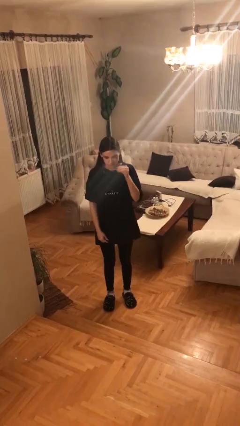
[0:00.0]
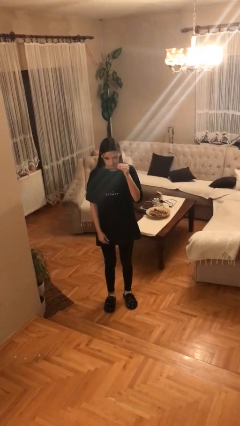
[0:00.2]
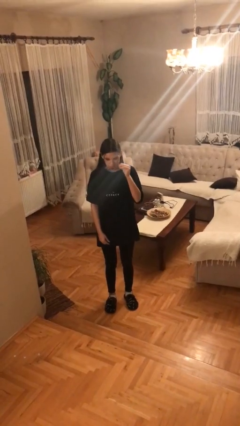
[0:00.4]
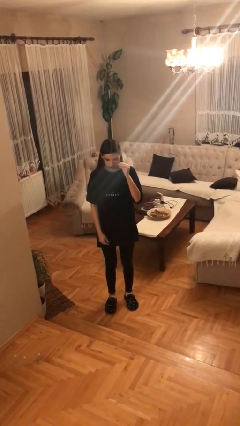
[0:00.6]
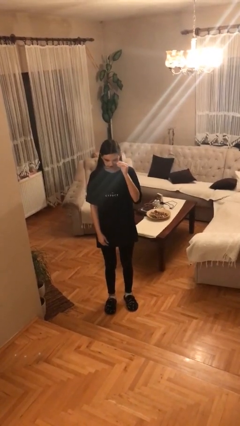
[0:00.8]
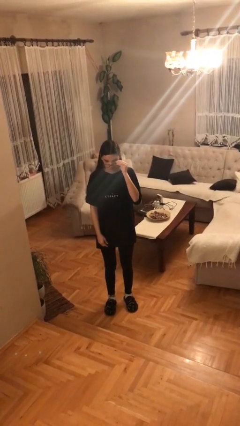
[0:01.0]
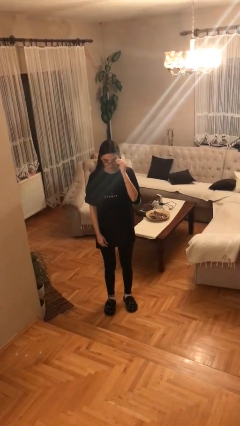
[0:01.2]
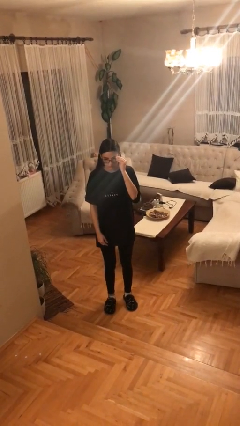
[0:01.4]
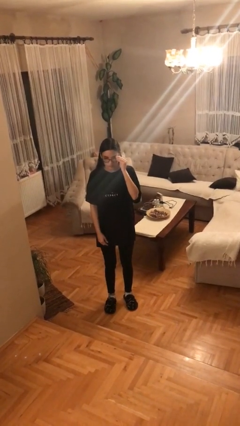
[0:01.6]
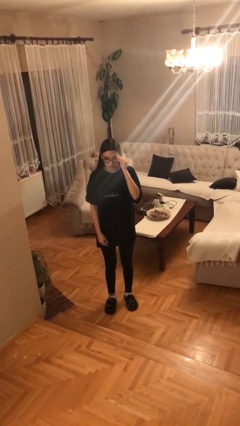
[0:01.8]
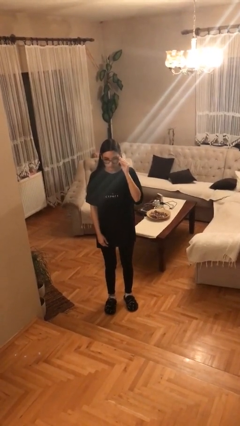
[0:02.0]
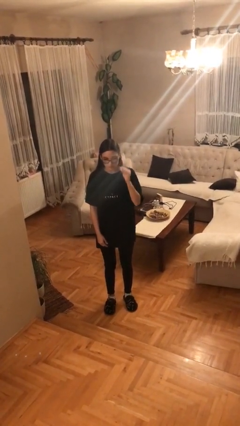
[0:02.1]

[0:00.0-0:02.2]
person puts on glasses

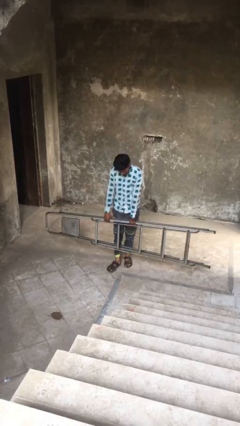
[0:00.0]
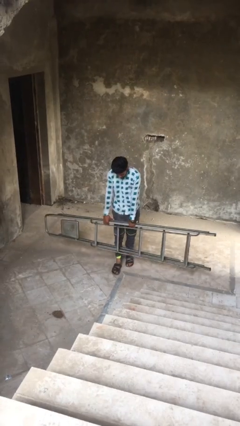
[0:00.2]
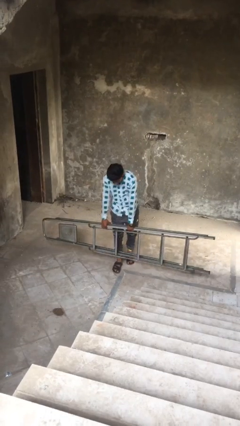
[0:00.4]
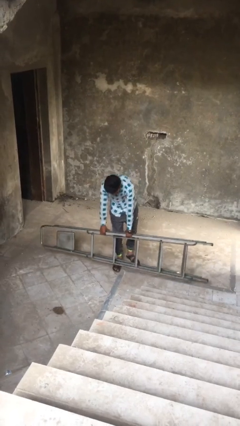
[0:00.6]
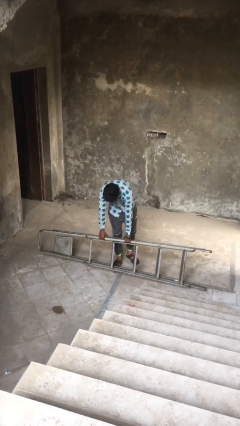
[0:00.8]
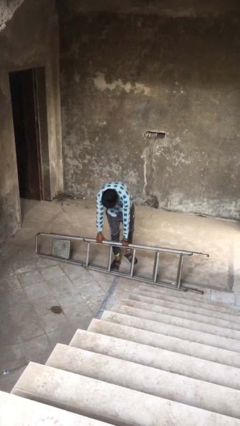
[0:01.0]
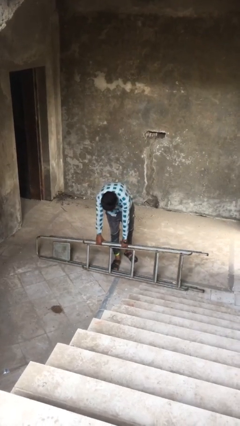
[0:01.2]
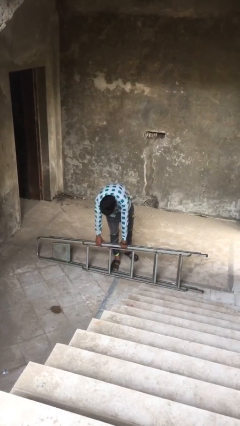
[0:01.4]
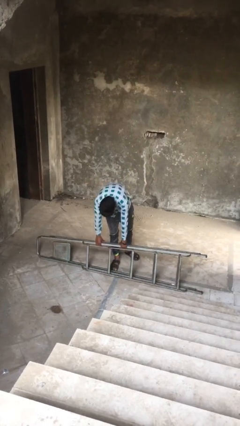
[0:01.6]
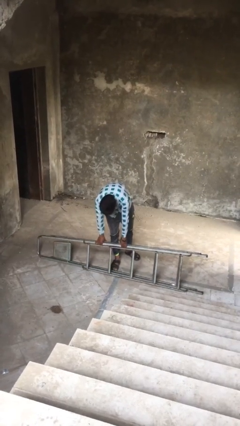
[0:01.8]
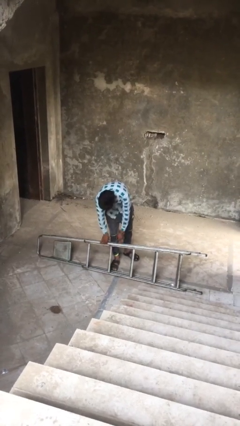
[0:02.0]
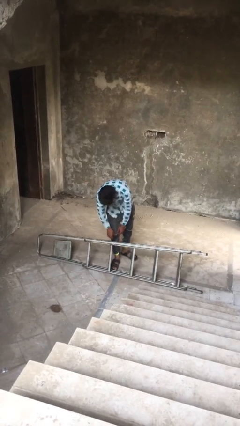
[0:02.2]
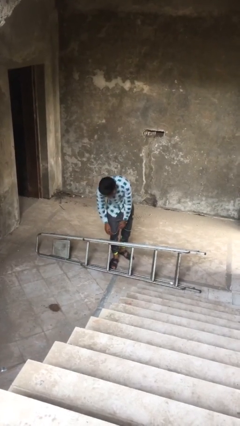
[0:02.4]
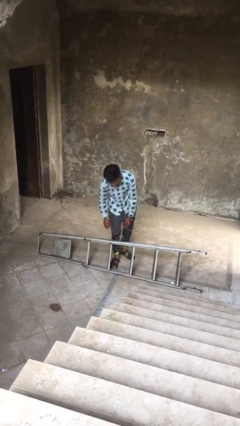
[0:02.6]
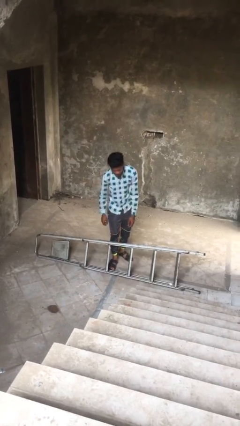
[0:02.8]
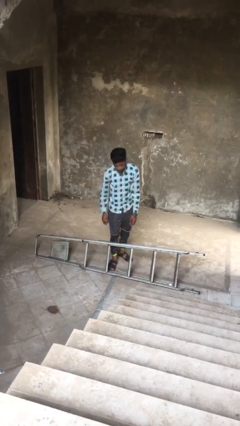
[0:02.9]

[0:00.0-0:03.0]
person puts down object on floor

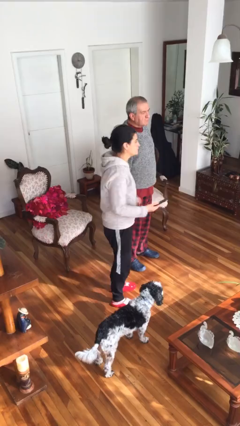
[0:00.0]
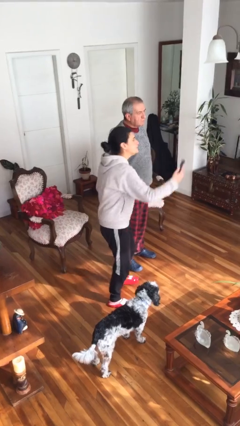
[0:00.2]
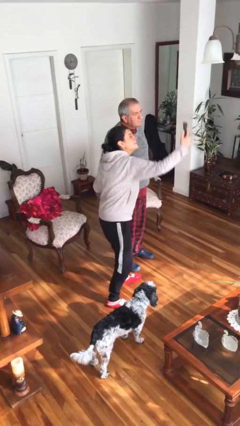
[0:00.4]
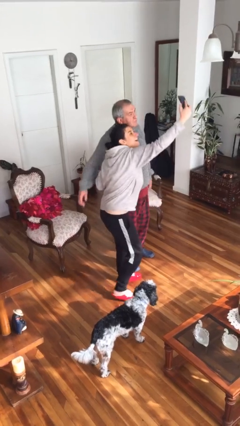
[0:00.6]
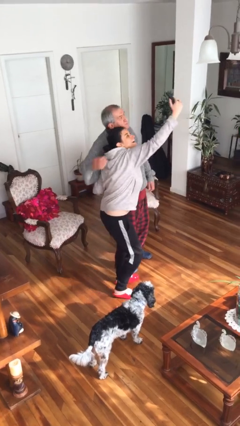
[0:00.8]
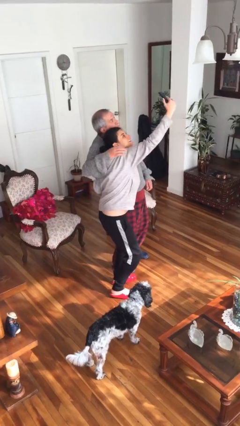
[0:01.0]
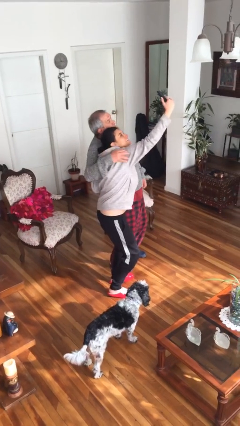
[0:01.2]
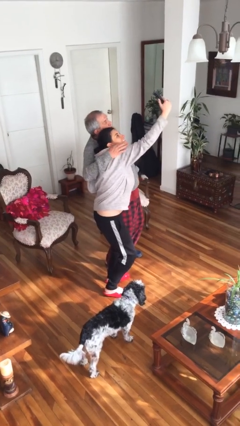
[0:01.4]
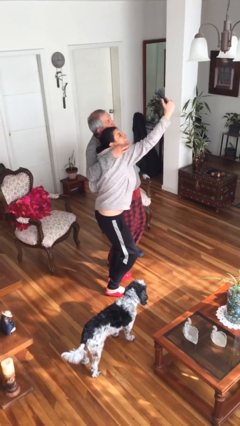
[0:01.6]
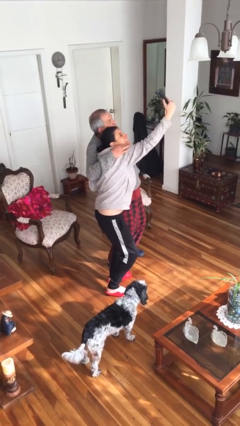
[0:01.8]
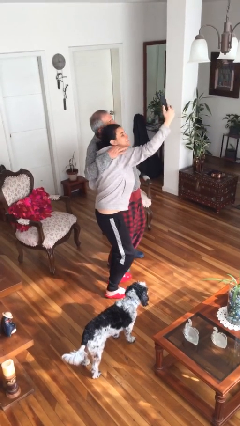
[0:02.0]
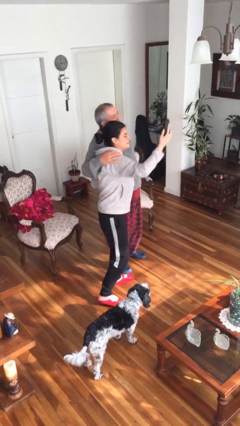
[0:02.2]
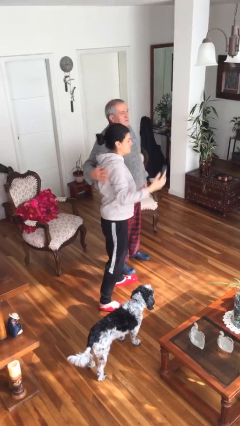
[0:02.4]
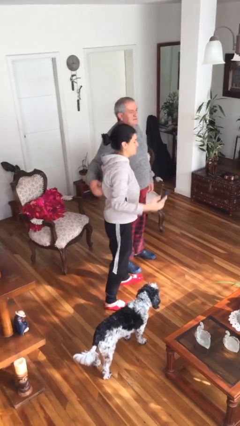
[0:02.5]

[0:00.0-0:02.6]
person takes selfie with person

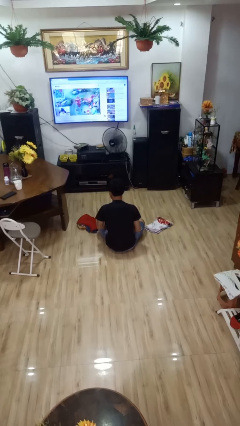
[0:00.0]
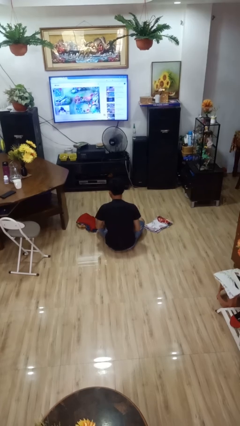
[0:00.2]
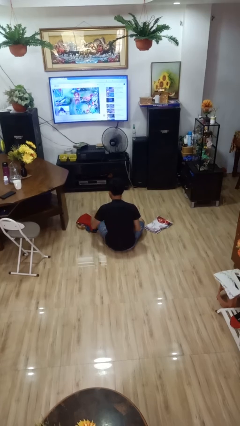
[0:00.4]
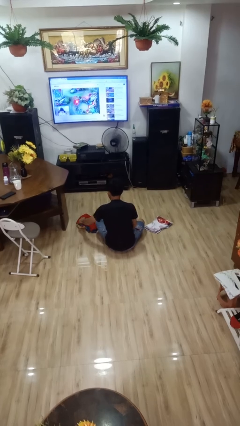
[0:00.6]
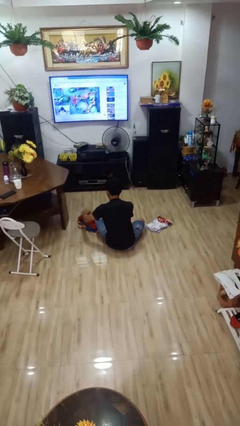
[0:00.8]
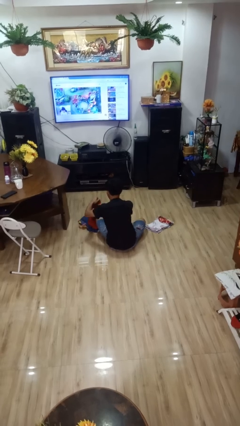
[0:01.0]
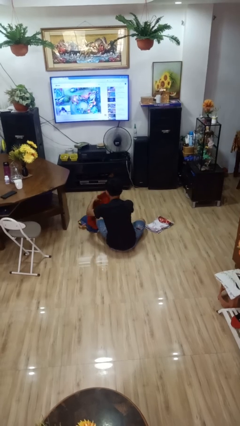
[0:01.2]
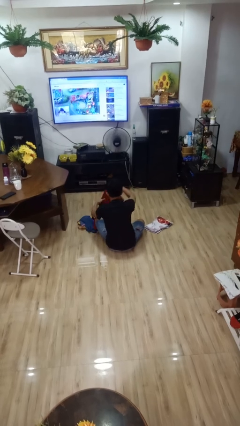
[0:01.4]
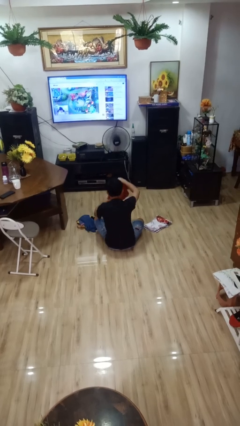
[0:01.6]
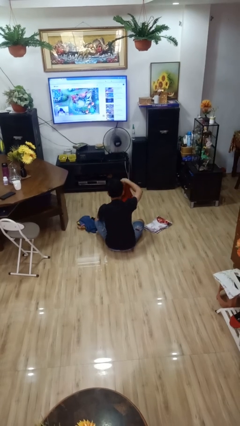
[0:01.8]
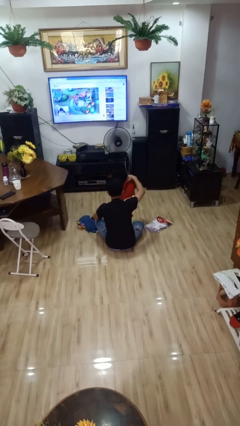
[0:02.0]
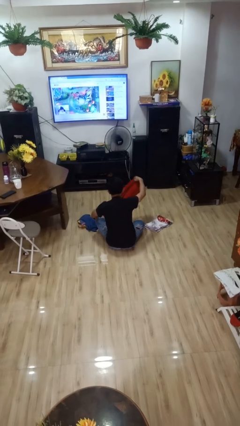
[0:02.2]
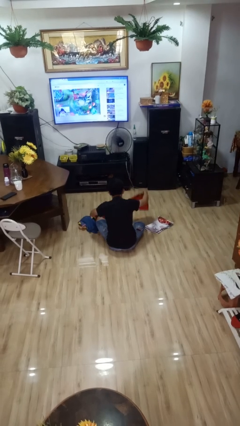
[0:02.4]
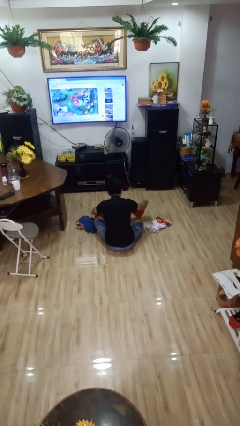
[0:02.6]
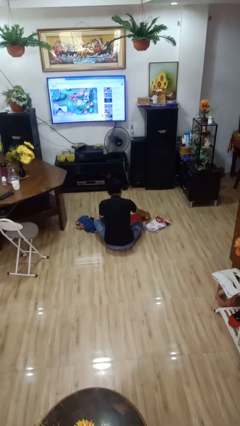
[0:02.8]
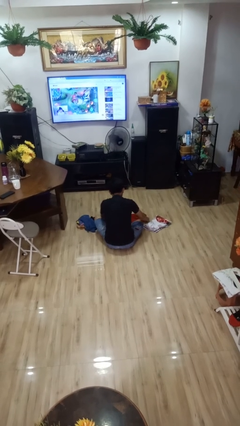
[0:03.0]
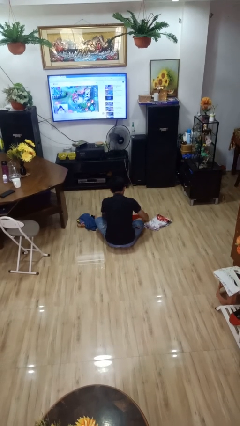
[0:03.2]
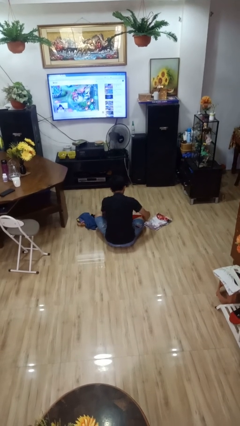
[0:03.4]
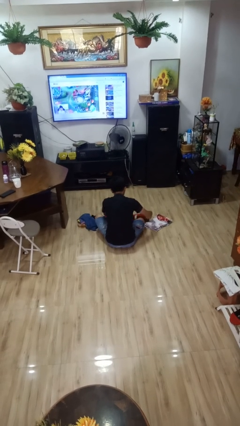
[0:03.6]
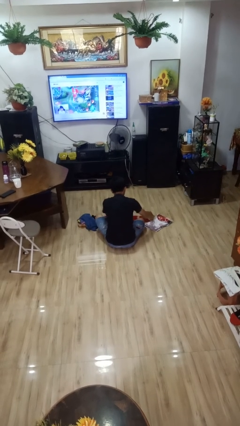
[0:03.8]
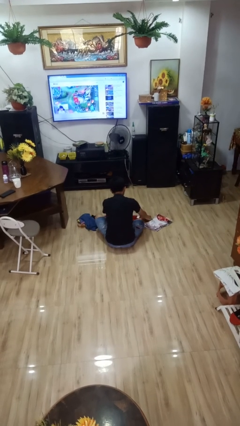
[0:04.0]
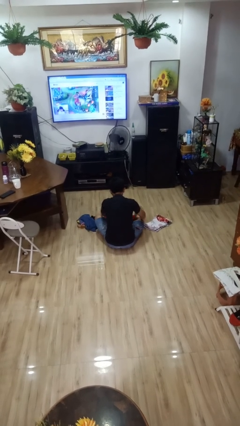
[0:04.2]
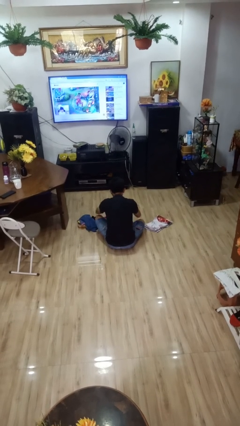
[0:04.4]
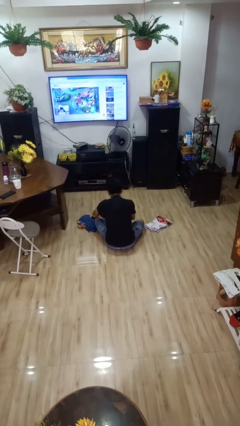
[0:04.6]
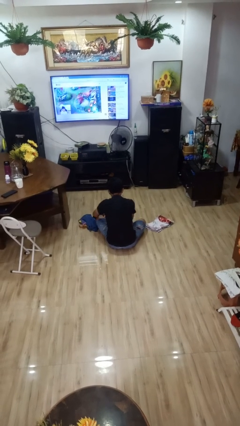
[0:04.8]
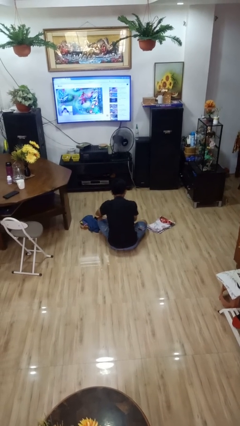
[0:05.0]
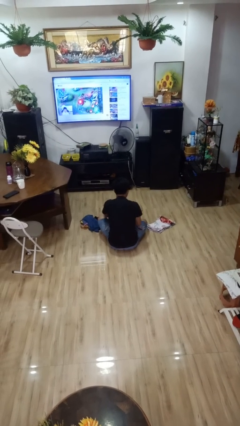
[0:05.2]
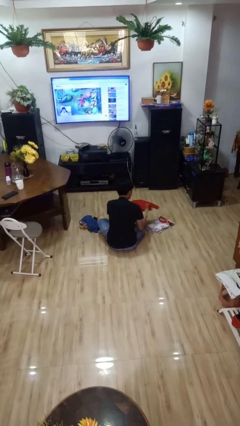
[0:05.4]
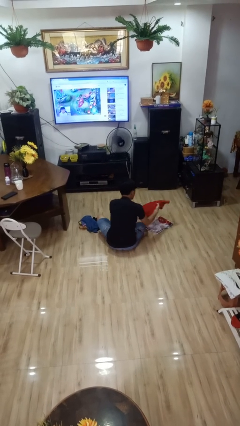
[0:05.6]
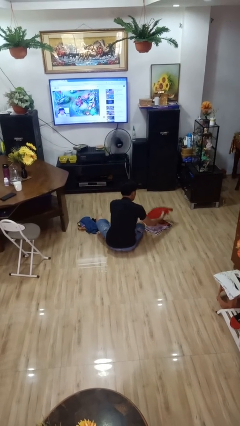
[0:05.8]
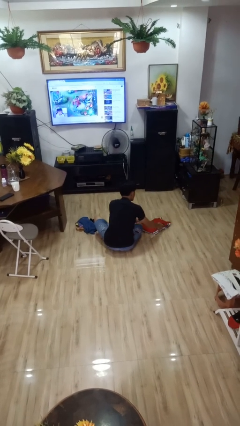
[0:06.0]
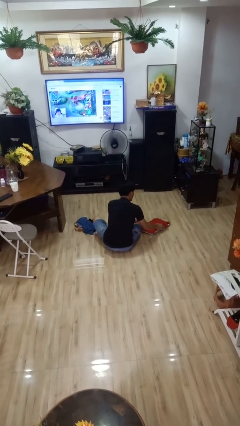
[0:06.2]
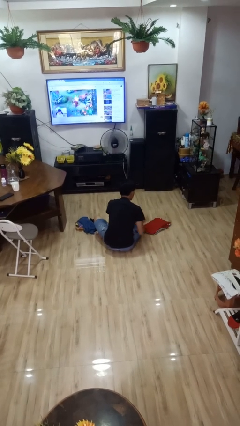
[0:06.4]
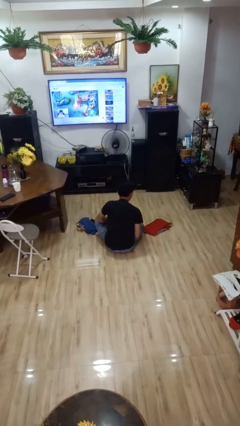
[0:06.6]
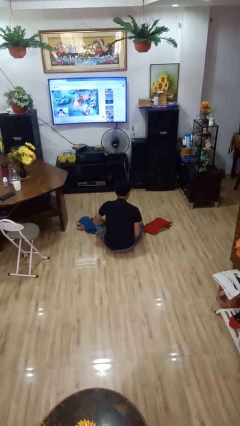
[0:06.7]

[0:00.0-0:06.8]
person folds shirt

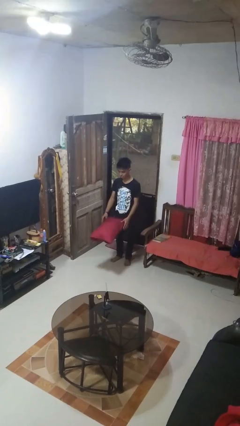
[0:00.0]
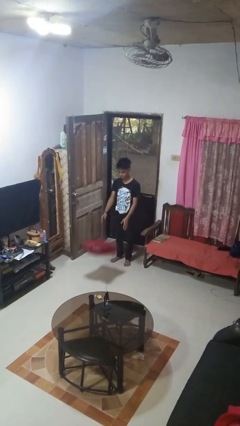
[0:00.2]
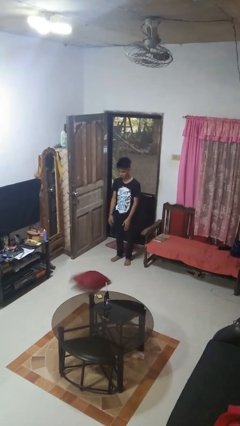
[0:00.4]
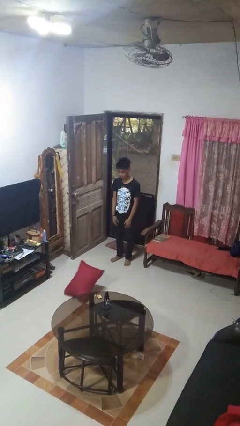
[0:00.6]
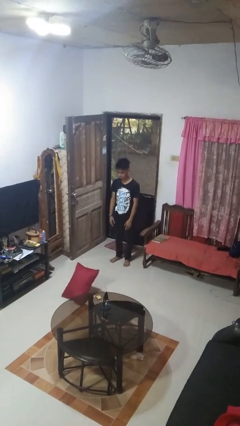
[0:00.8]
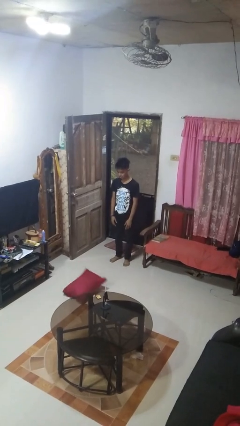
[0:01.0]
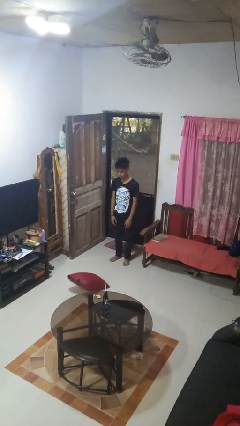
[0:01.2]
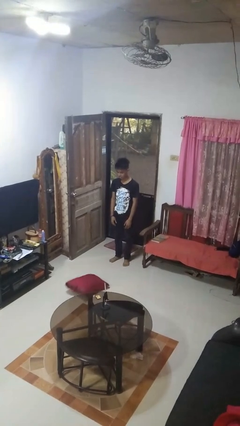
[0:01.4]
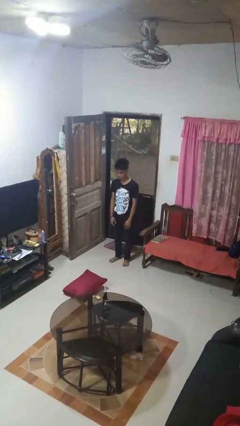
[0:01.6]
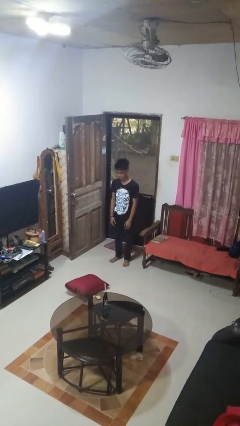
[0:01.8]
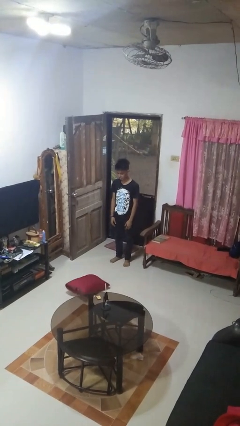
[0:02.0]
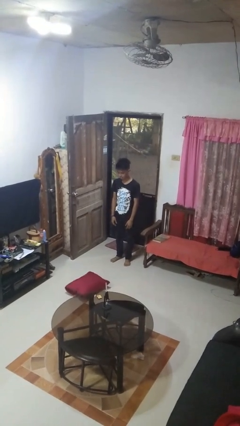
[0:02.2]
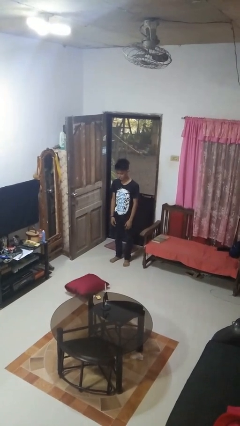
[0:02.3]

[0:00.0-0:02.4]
person throws object to ground
